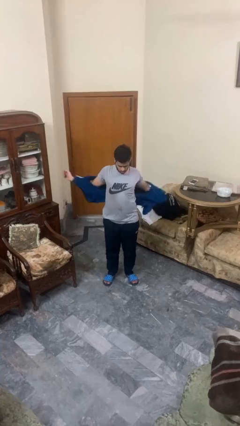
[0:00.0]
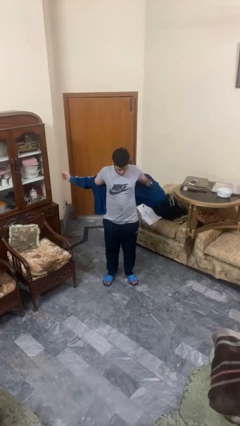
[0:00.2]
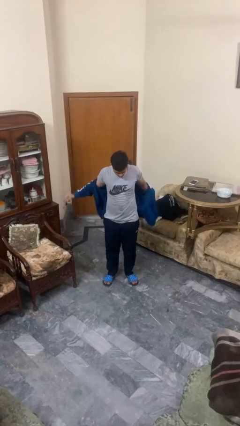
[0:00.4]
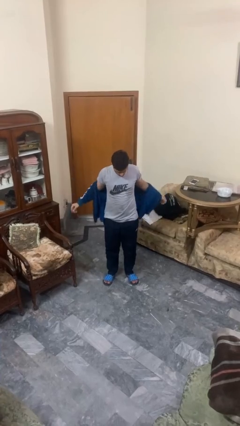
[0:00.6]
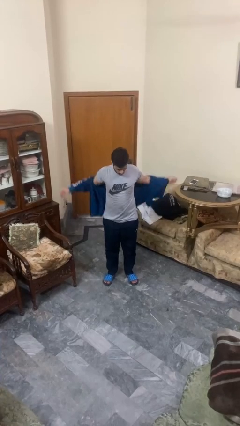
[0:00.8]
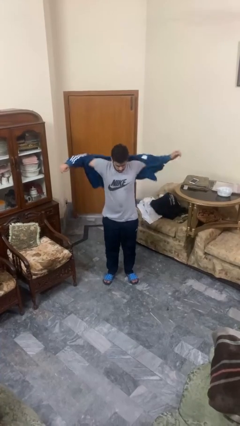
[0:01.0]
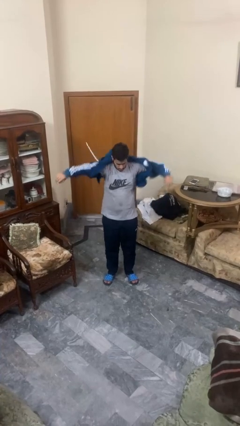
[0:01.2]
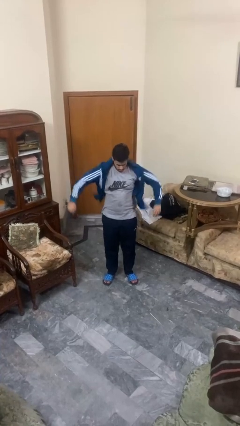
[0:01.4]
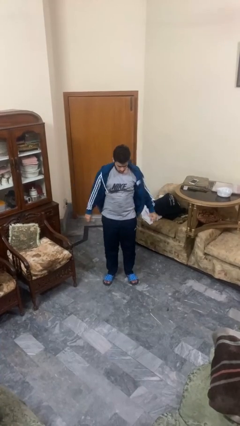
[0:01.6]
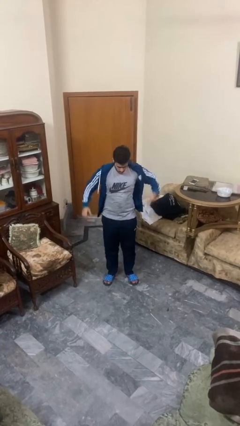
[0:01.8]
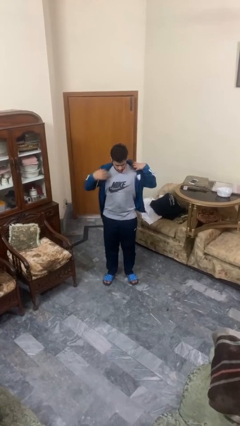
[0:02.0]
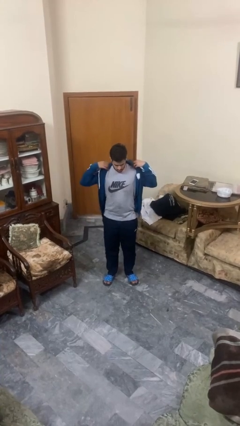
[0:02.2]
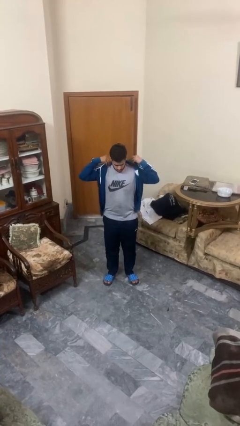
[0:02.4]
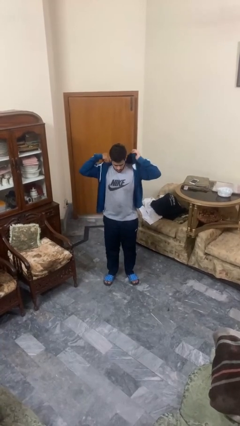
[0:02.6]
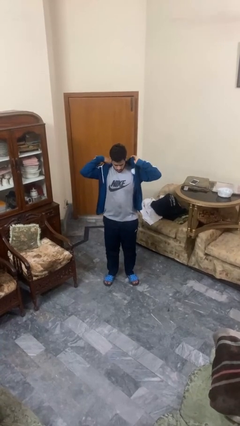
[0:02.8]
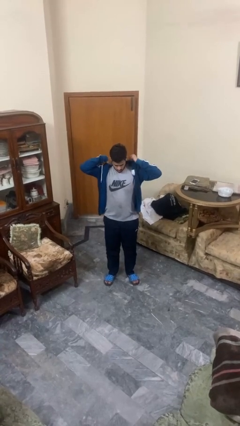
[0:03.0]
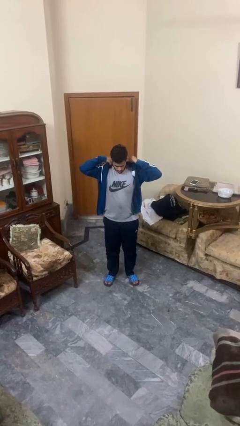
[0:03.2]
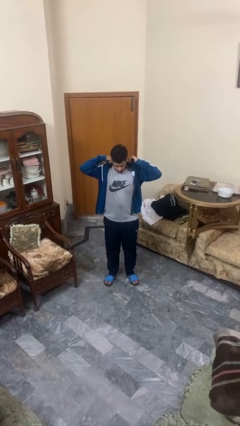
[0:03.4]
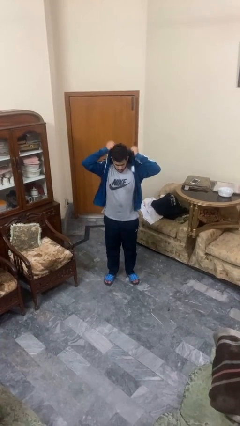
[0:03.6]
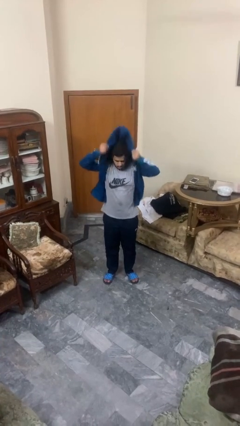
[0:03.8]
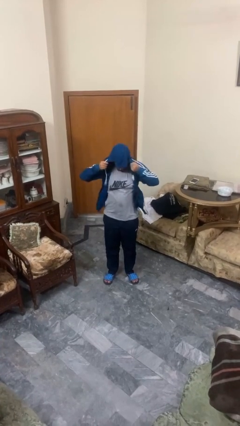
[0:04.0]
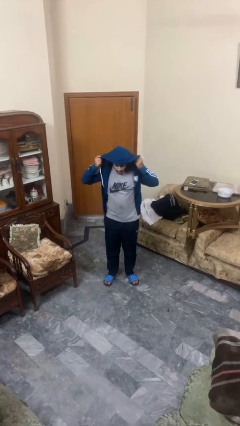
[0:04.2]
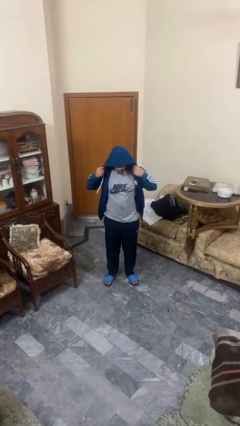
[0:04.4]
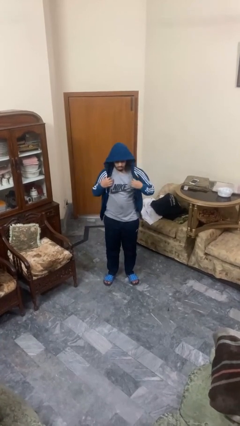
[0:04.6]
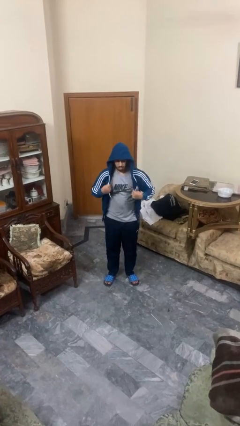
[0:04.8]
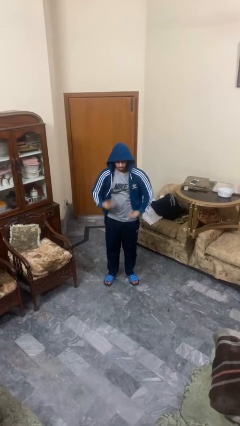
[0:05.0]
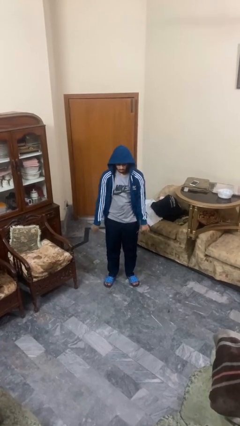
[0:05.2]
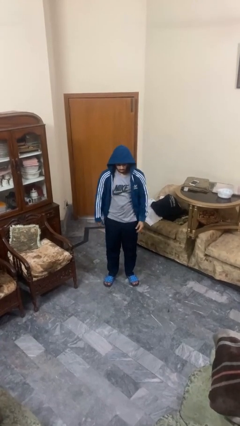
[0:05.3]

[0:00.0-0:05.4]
person puts on hoodie

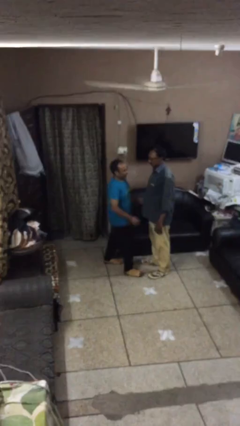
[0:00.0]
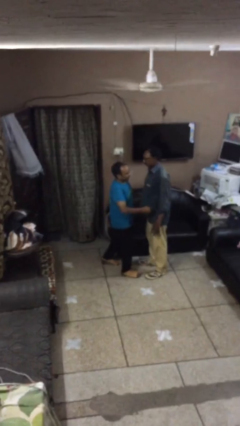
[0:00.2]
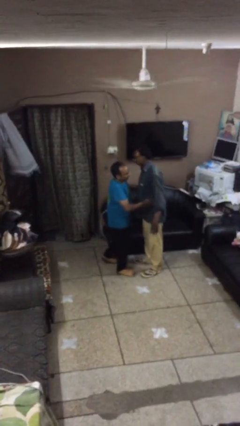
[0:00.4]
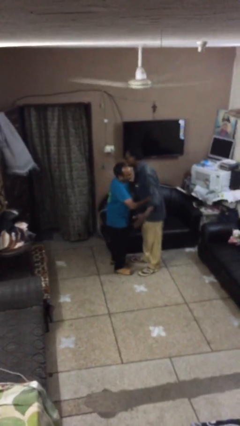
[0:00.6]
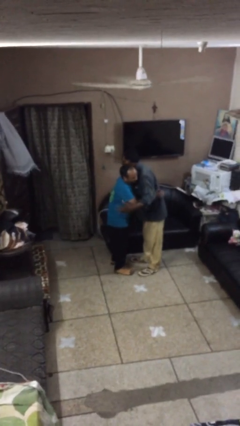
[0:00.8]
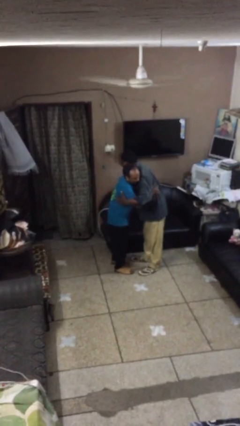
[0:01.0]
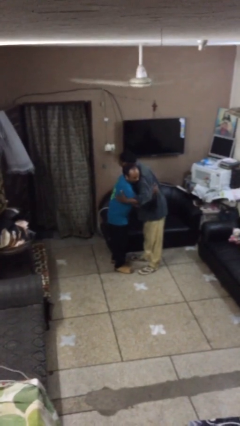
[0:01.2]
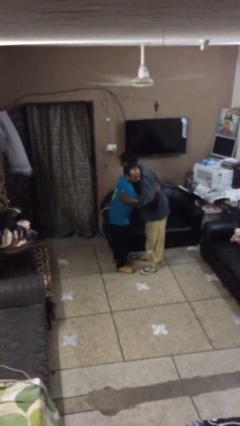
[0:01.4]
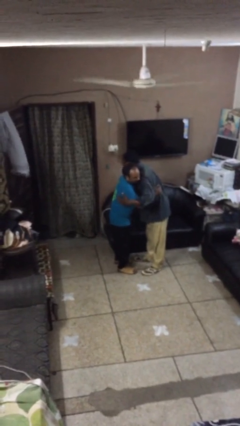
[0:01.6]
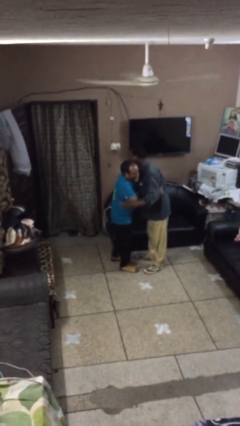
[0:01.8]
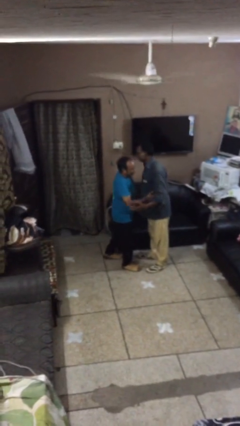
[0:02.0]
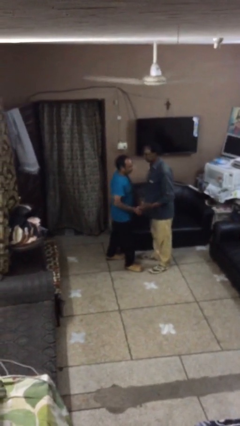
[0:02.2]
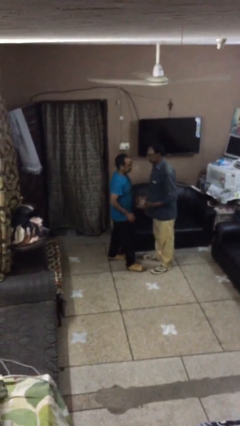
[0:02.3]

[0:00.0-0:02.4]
person embraces person

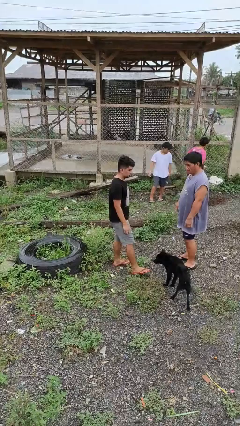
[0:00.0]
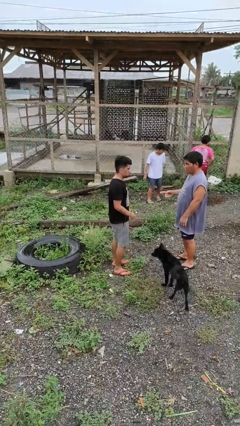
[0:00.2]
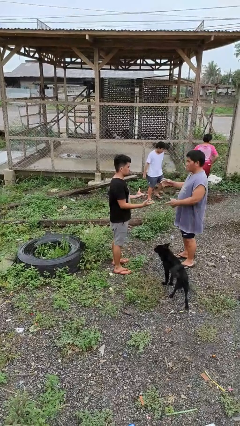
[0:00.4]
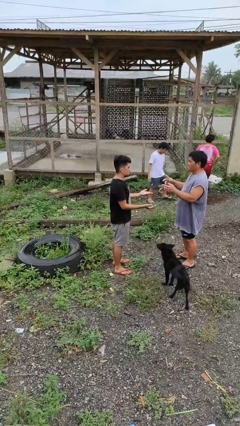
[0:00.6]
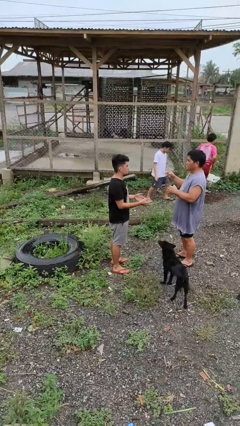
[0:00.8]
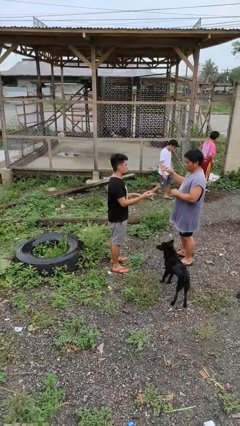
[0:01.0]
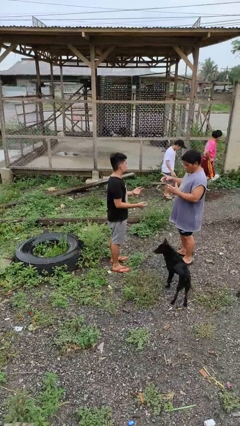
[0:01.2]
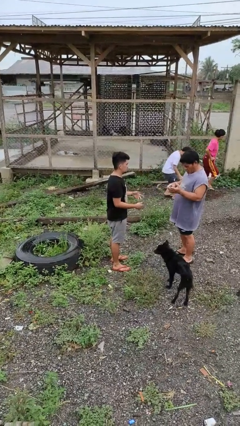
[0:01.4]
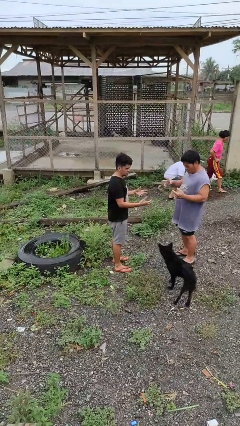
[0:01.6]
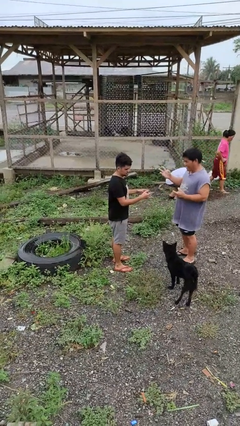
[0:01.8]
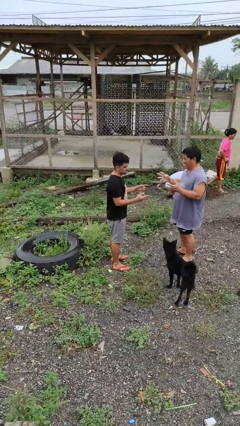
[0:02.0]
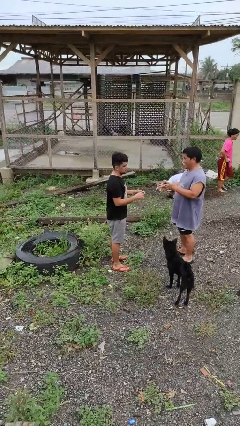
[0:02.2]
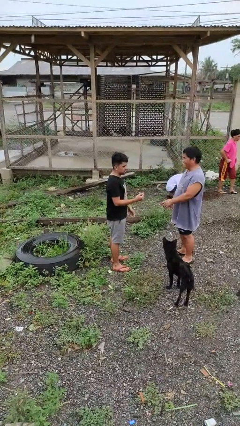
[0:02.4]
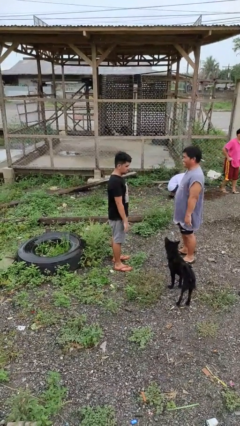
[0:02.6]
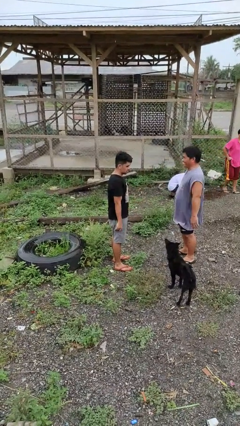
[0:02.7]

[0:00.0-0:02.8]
person talks to person

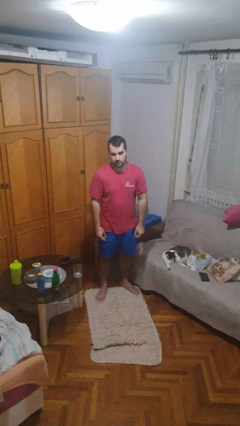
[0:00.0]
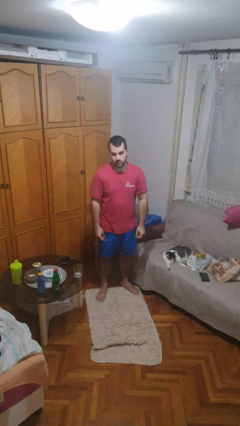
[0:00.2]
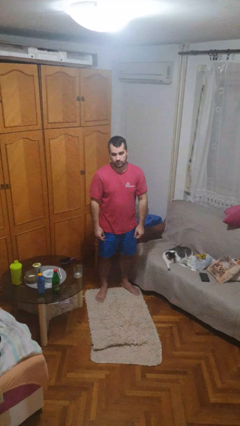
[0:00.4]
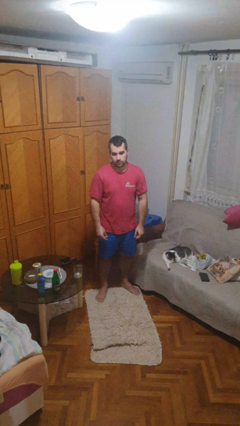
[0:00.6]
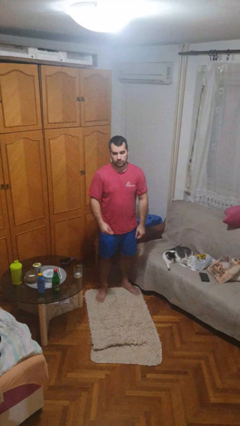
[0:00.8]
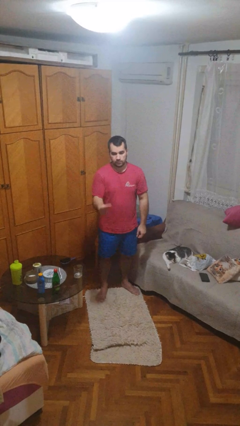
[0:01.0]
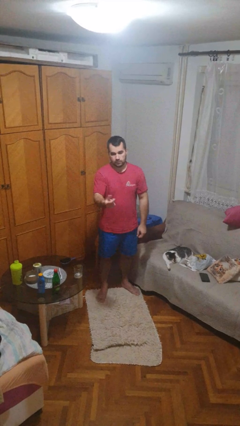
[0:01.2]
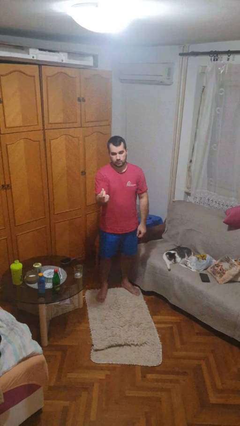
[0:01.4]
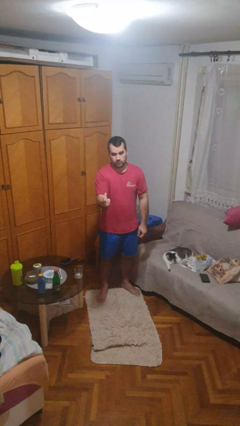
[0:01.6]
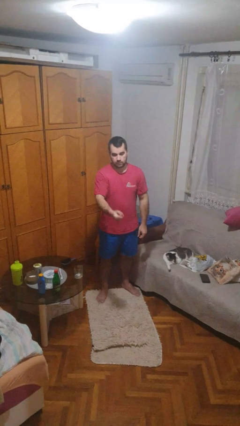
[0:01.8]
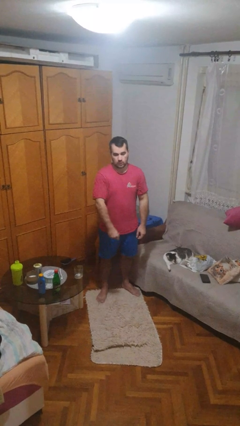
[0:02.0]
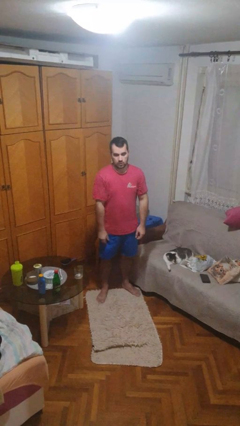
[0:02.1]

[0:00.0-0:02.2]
person snaps fingers

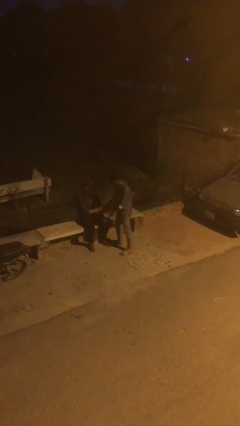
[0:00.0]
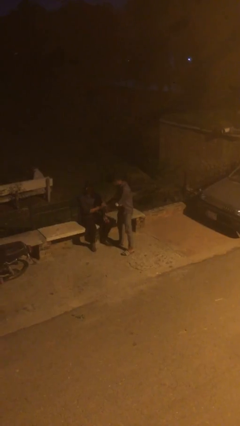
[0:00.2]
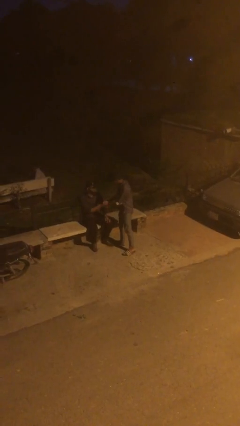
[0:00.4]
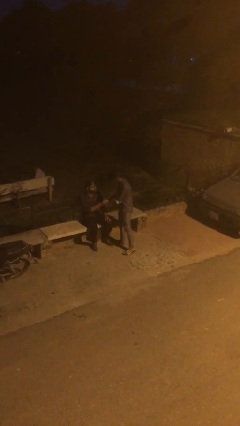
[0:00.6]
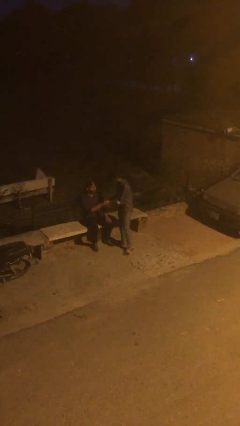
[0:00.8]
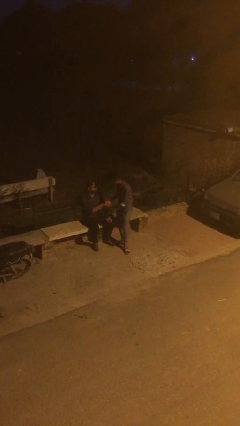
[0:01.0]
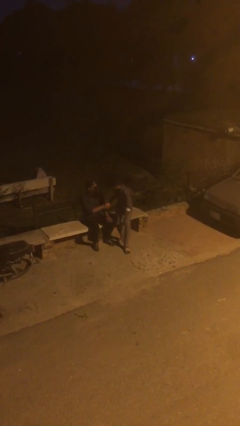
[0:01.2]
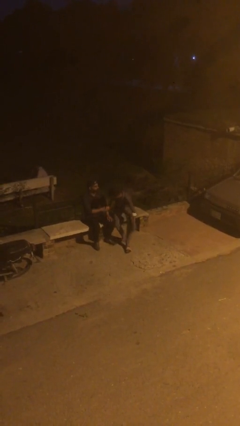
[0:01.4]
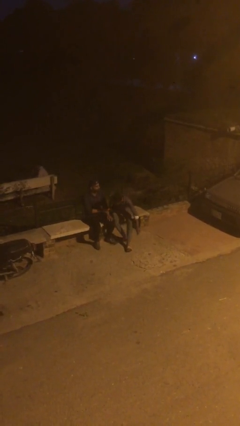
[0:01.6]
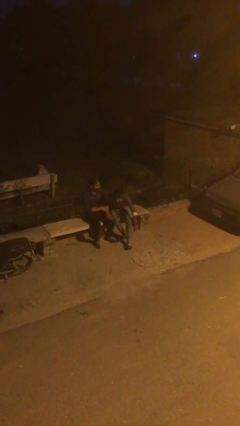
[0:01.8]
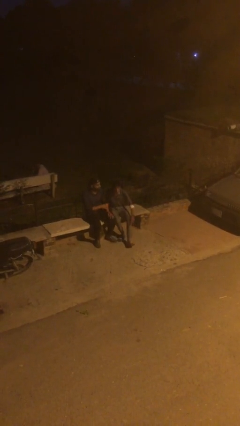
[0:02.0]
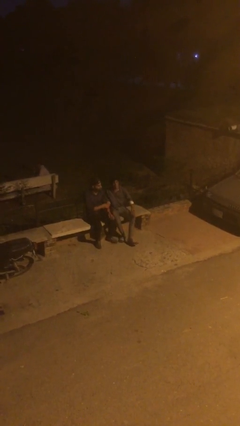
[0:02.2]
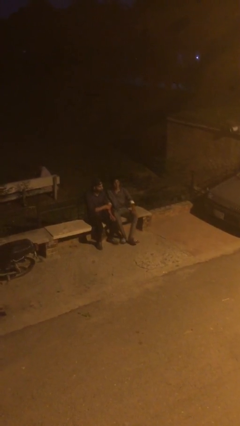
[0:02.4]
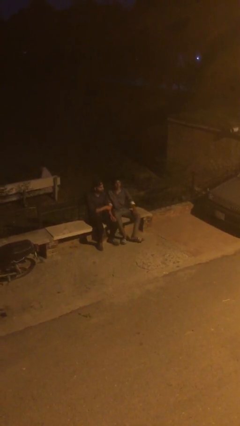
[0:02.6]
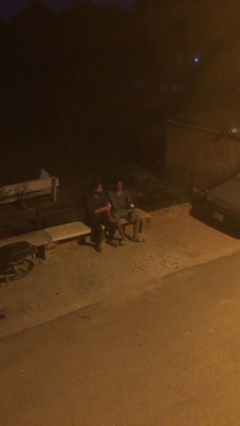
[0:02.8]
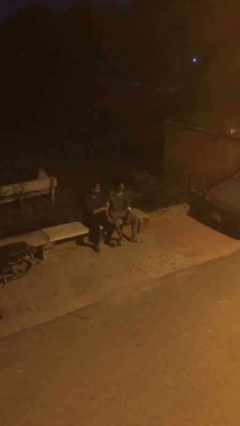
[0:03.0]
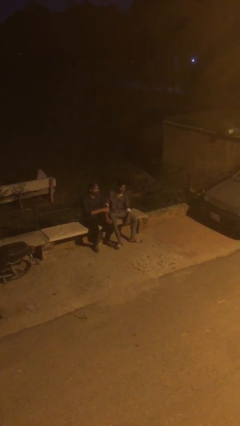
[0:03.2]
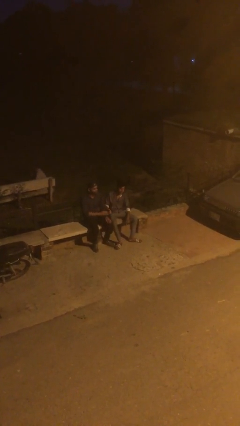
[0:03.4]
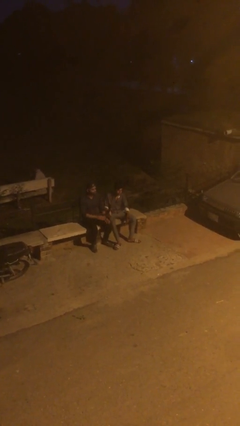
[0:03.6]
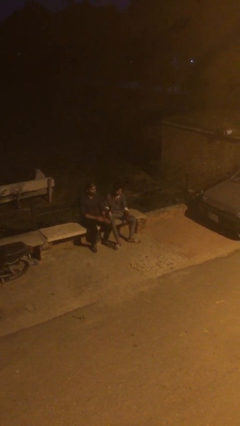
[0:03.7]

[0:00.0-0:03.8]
person shakes hand

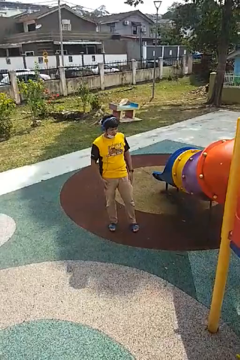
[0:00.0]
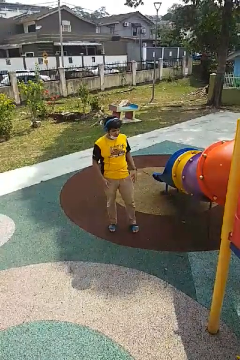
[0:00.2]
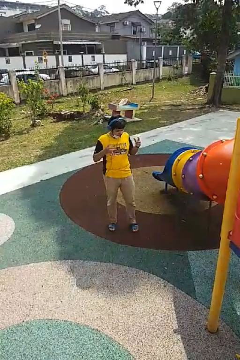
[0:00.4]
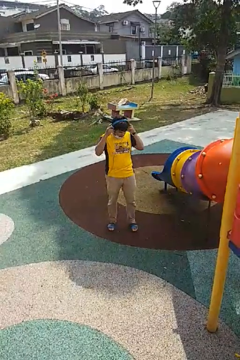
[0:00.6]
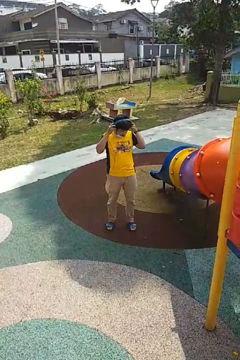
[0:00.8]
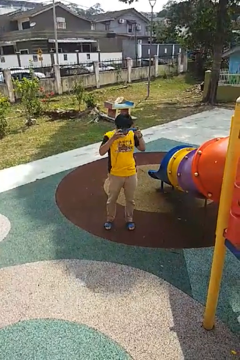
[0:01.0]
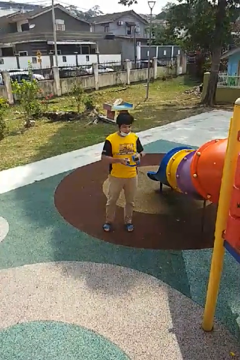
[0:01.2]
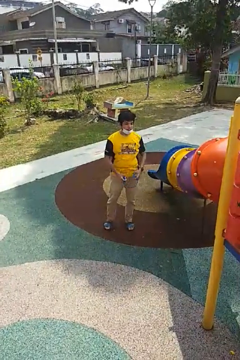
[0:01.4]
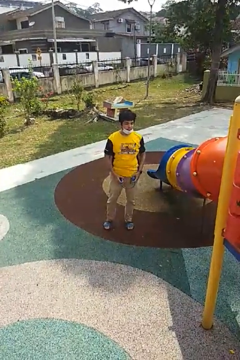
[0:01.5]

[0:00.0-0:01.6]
person takes off headphones
